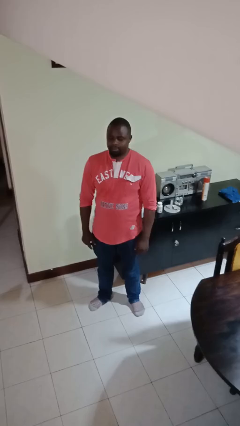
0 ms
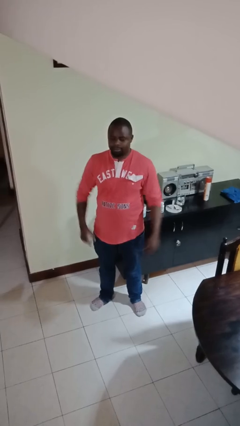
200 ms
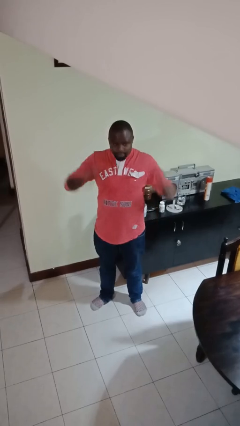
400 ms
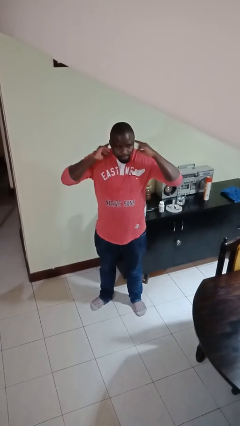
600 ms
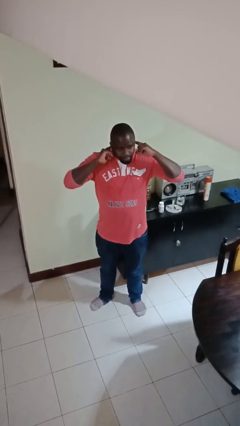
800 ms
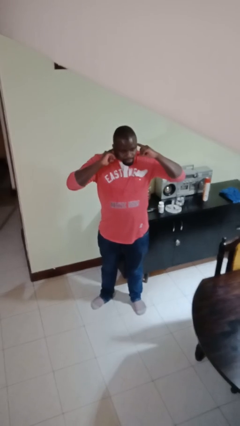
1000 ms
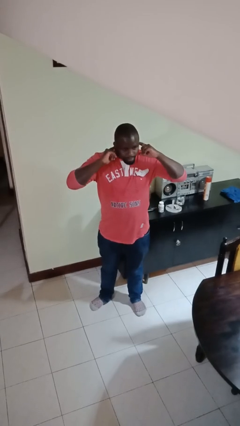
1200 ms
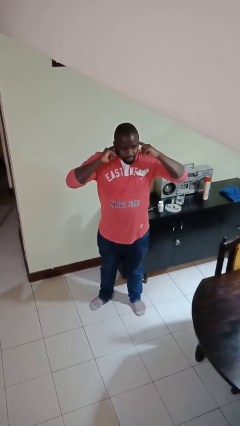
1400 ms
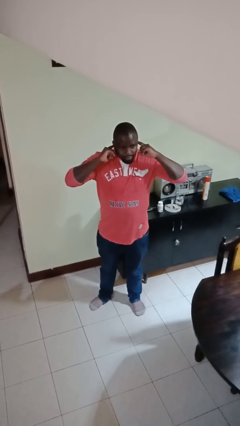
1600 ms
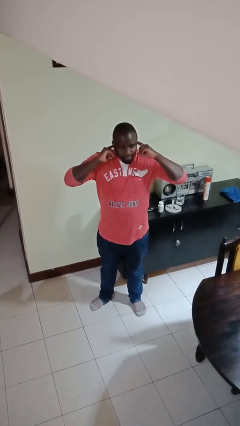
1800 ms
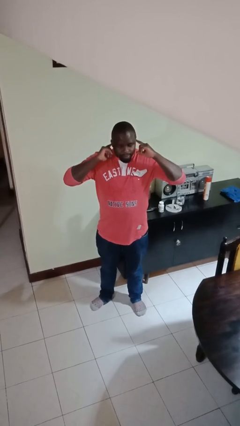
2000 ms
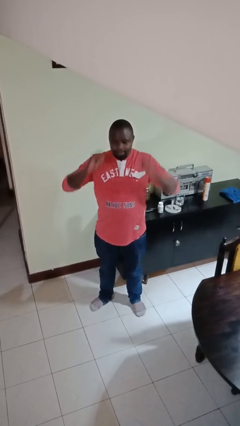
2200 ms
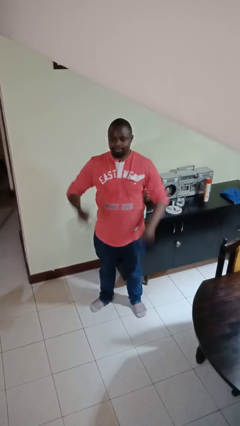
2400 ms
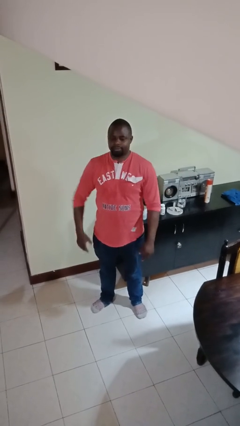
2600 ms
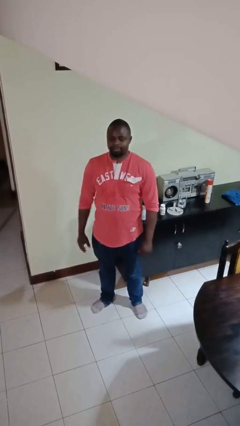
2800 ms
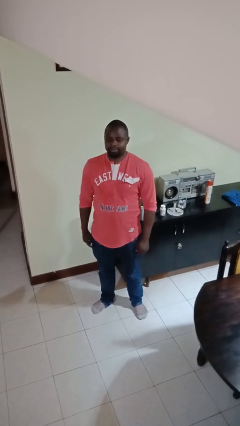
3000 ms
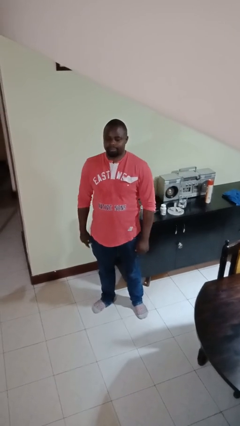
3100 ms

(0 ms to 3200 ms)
person puts fingers in ear

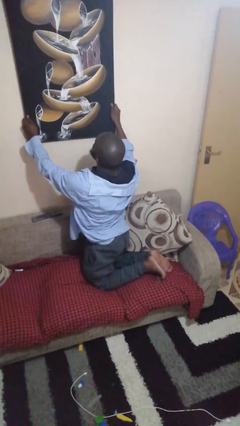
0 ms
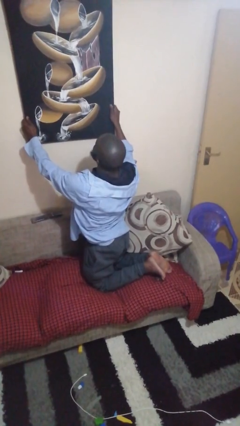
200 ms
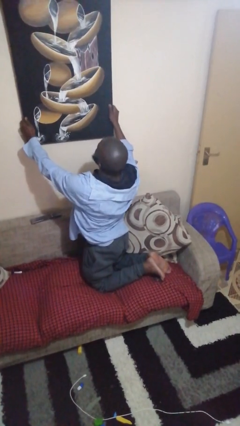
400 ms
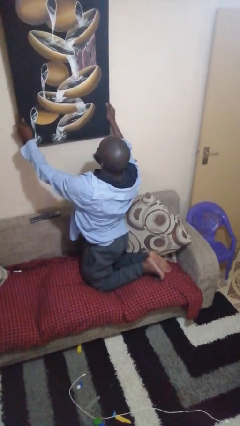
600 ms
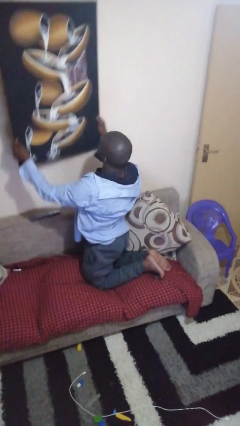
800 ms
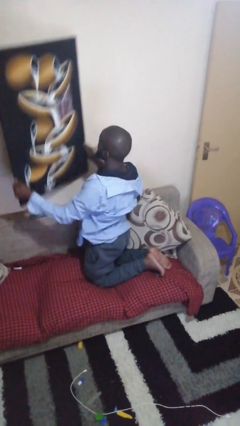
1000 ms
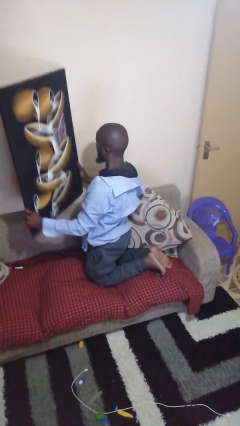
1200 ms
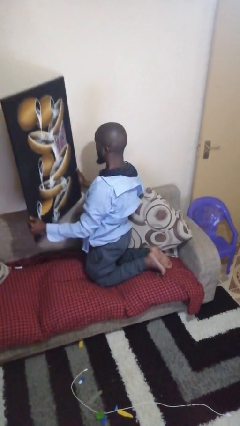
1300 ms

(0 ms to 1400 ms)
person takes down picture frame

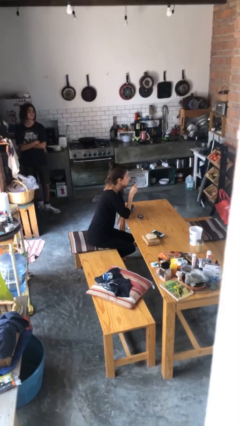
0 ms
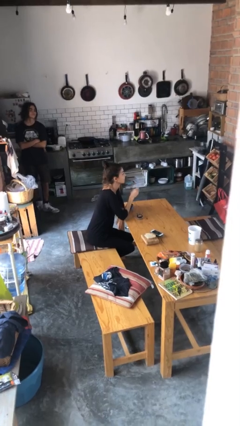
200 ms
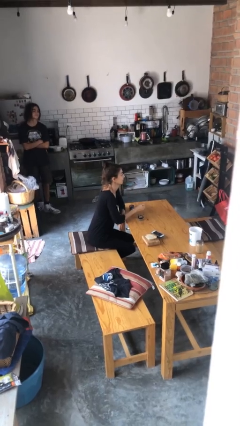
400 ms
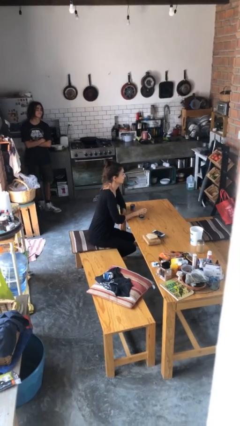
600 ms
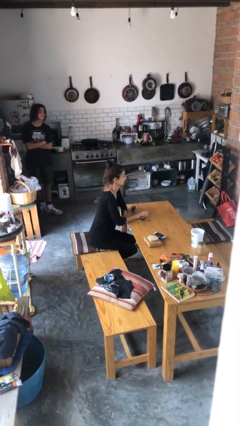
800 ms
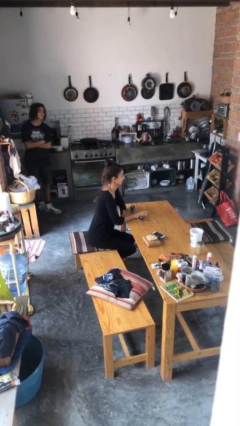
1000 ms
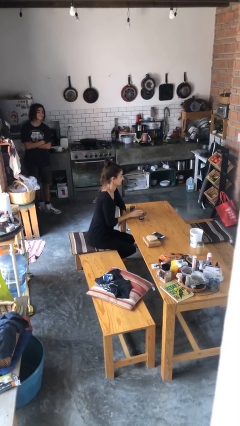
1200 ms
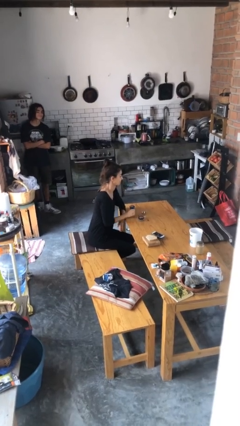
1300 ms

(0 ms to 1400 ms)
person puts down object on table

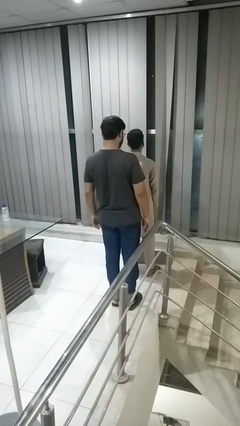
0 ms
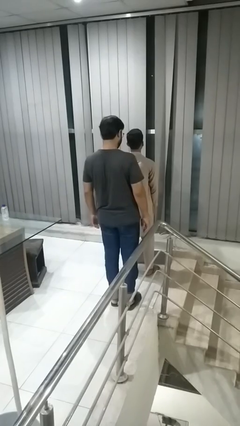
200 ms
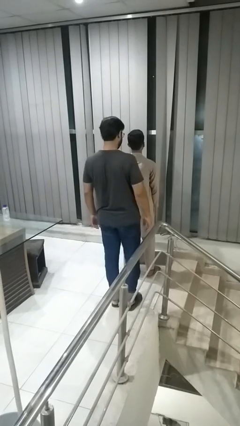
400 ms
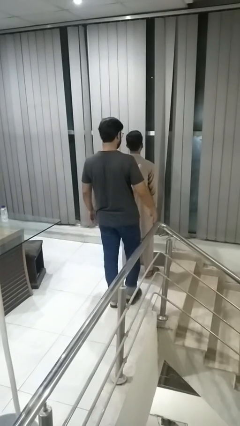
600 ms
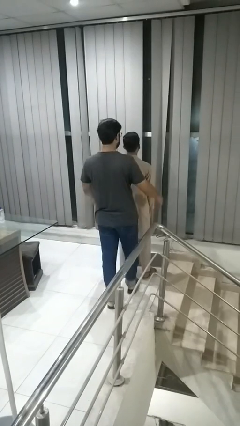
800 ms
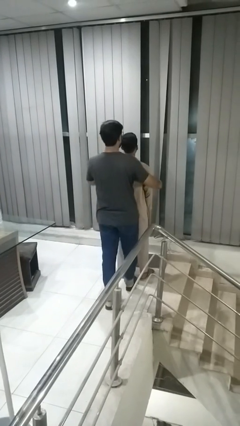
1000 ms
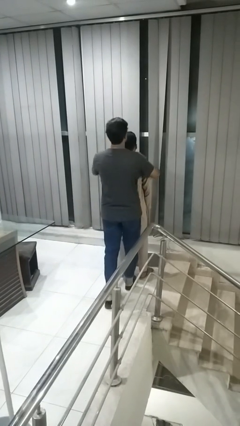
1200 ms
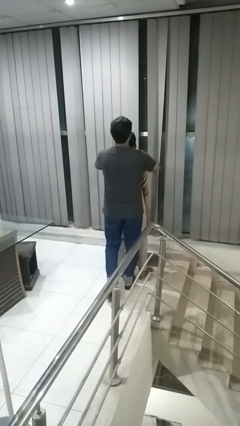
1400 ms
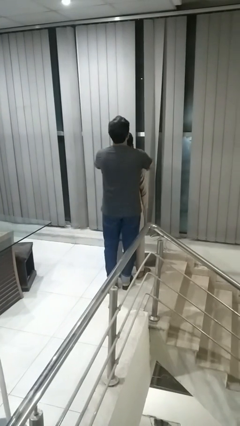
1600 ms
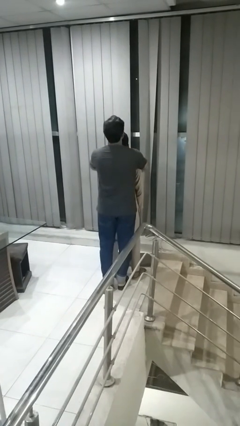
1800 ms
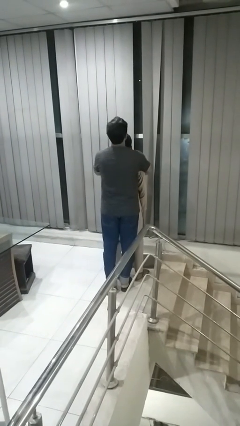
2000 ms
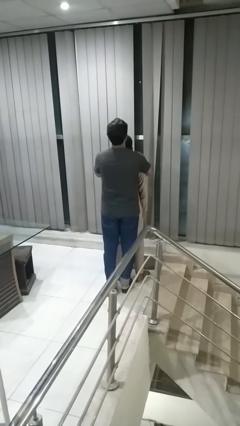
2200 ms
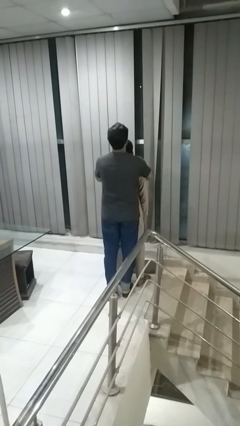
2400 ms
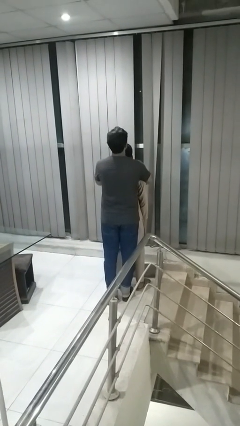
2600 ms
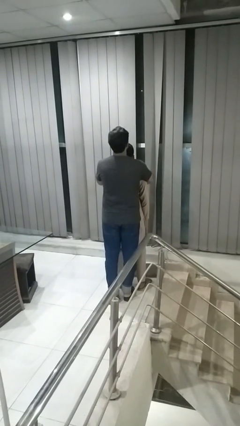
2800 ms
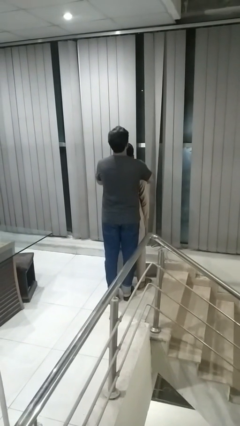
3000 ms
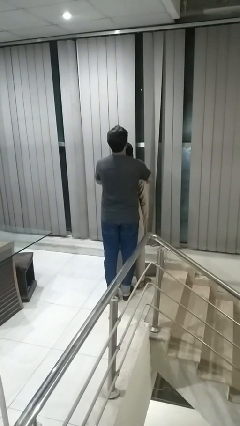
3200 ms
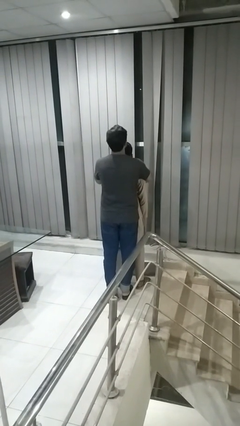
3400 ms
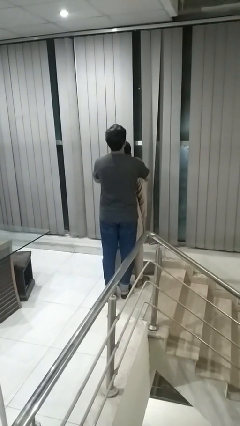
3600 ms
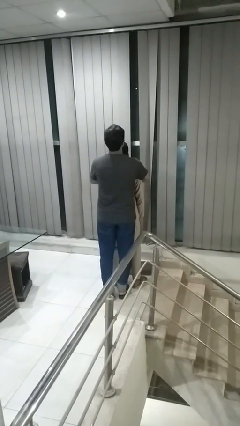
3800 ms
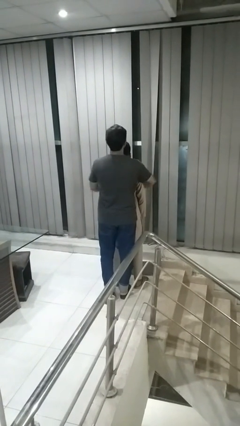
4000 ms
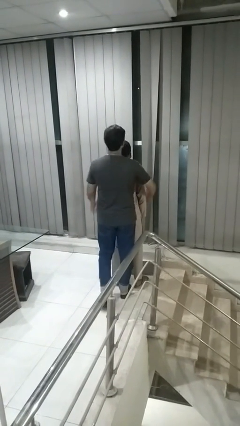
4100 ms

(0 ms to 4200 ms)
person hugs person from behind

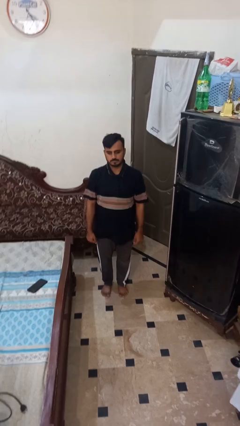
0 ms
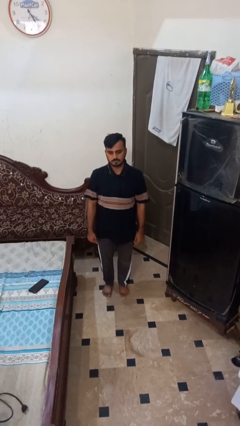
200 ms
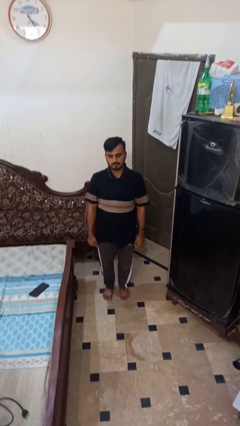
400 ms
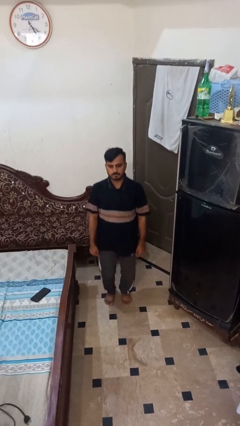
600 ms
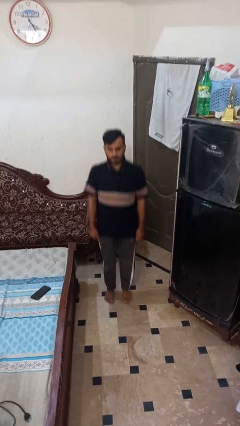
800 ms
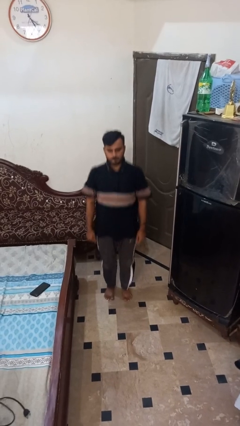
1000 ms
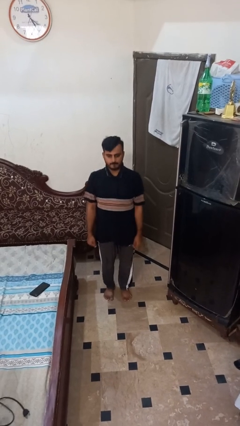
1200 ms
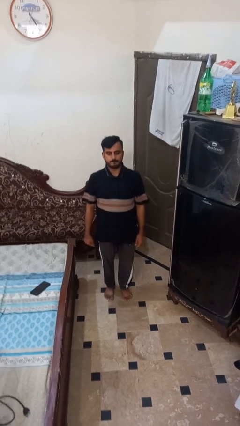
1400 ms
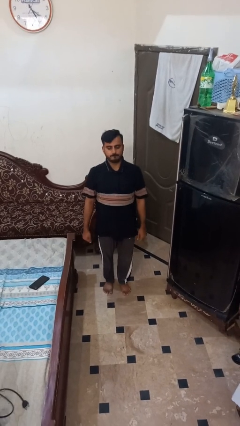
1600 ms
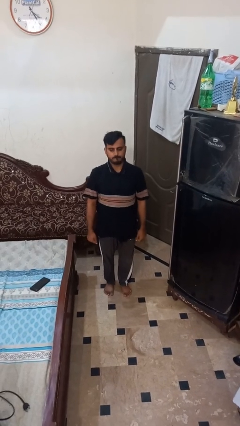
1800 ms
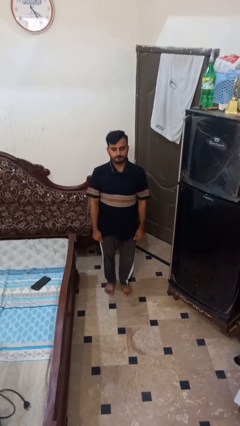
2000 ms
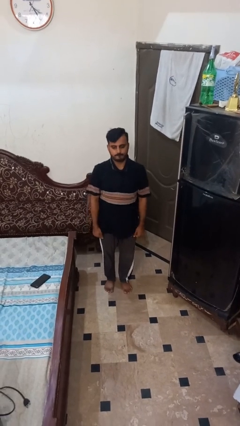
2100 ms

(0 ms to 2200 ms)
person jumps

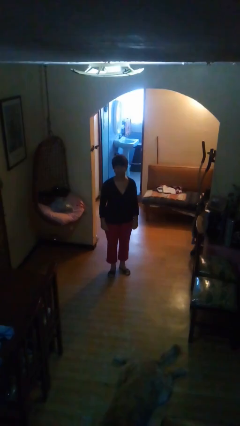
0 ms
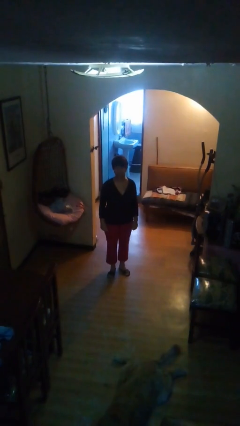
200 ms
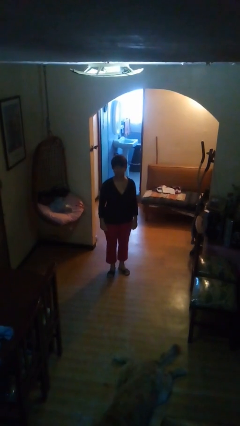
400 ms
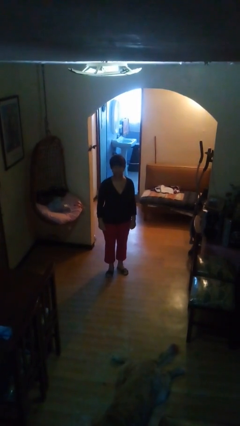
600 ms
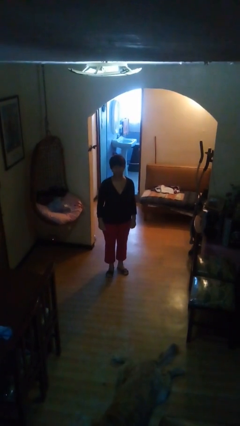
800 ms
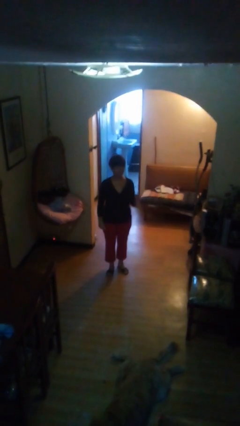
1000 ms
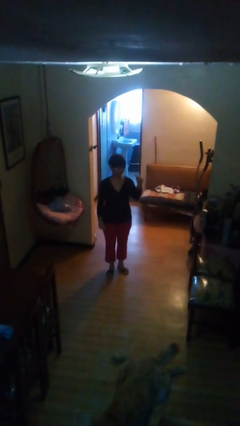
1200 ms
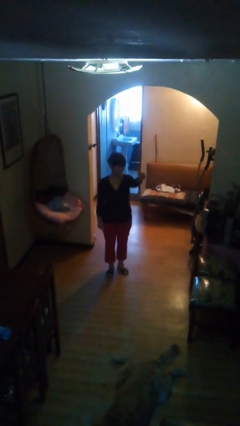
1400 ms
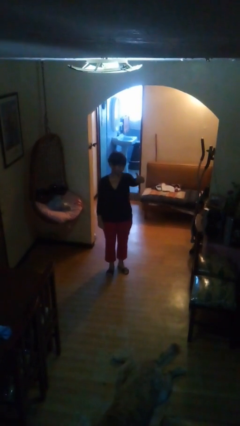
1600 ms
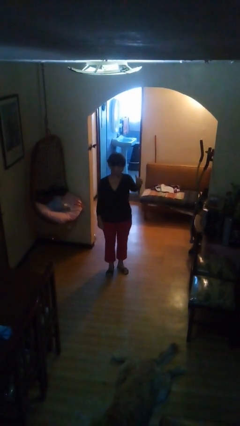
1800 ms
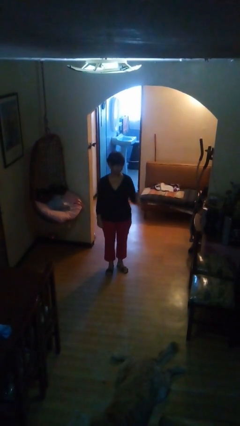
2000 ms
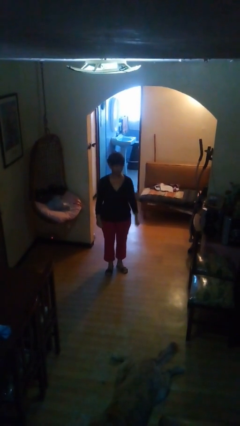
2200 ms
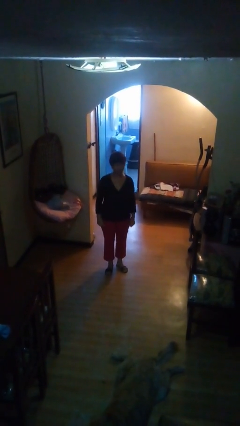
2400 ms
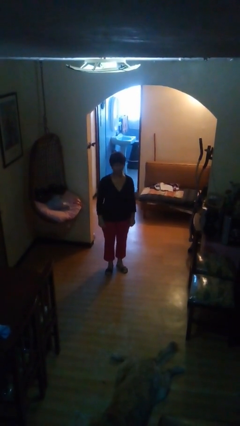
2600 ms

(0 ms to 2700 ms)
person gestures thumbs up

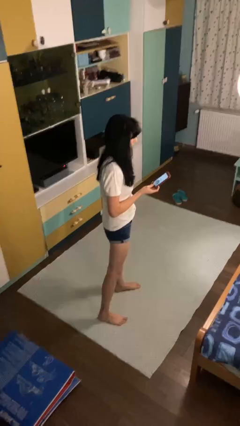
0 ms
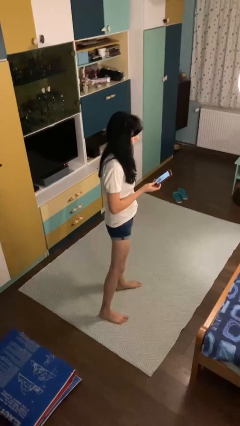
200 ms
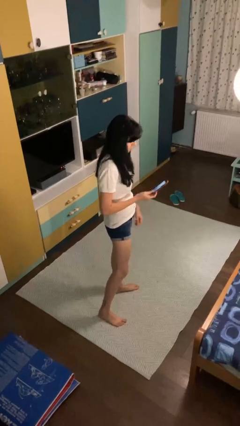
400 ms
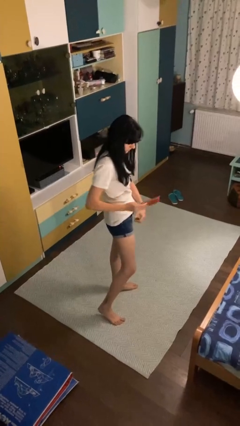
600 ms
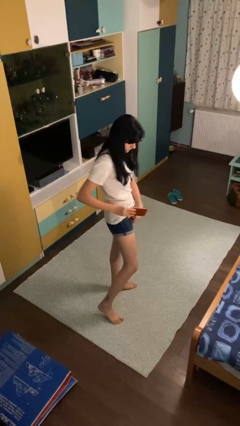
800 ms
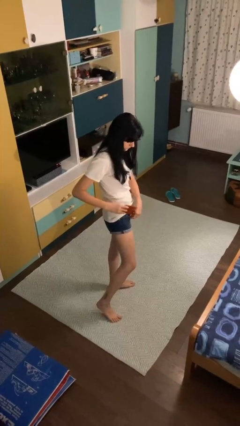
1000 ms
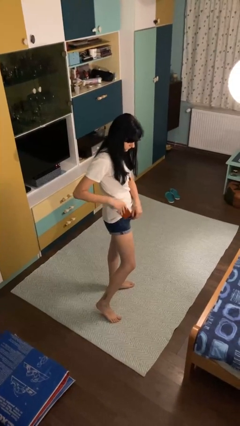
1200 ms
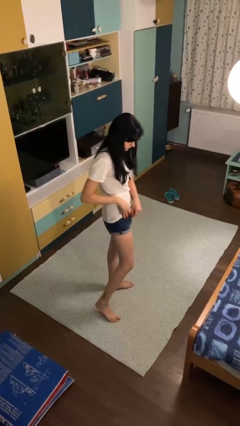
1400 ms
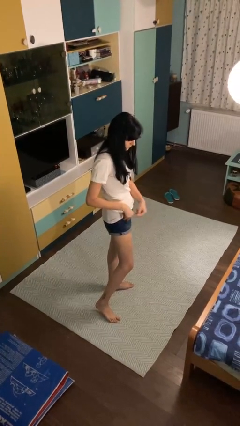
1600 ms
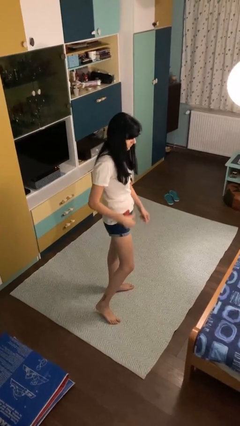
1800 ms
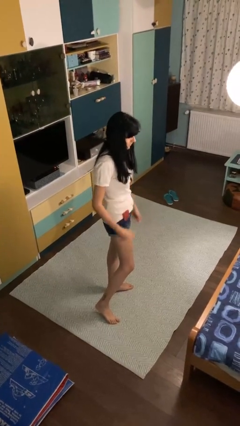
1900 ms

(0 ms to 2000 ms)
person puts phone into pocket
